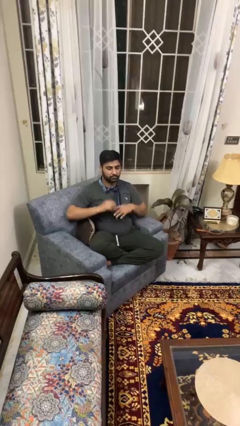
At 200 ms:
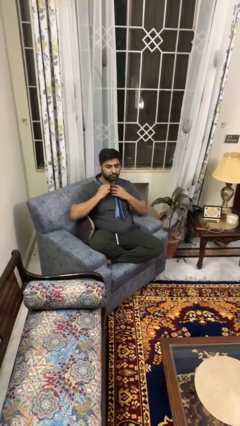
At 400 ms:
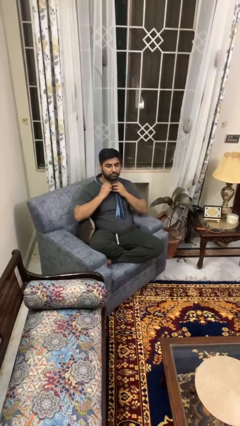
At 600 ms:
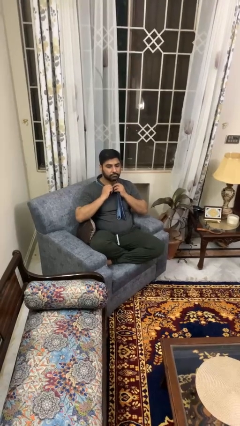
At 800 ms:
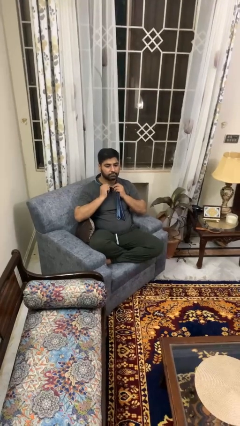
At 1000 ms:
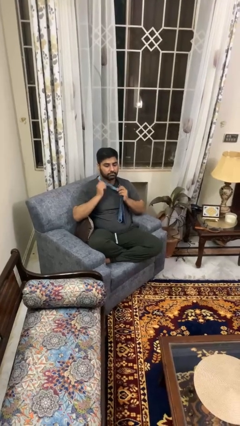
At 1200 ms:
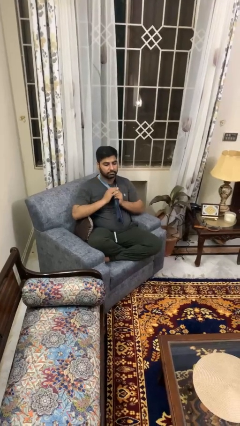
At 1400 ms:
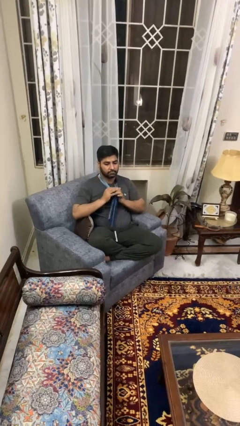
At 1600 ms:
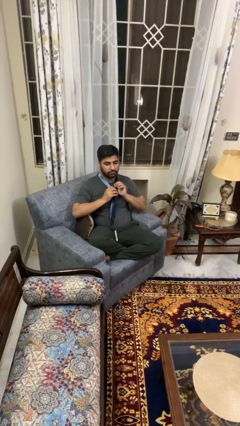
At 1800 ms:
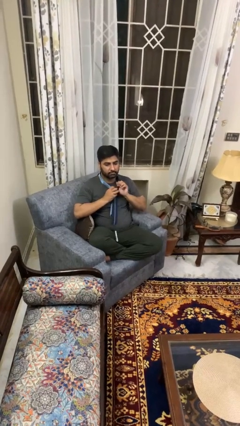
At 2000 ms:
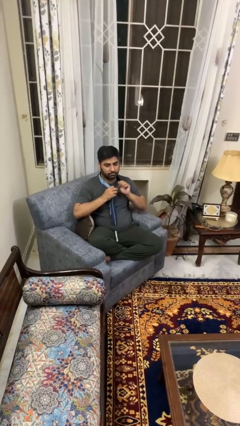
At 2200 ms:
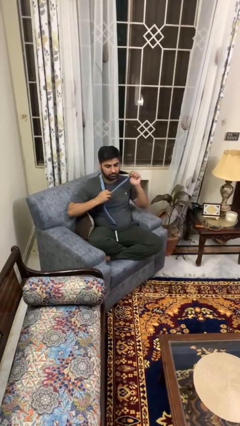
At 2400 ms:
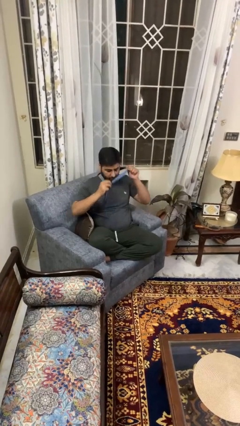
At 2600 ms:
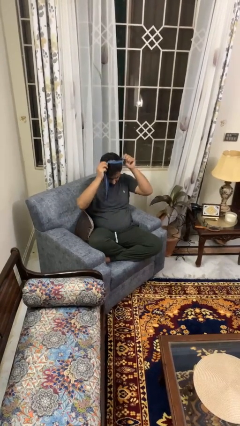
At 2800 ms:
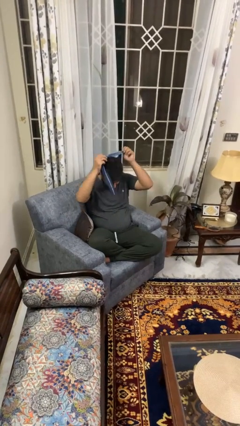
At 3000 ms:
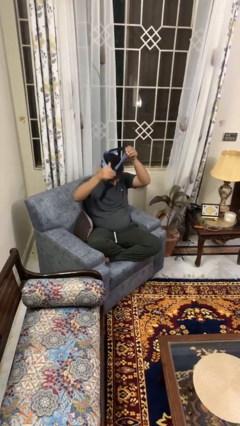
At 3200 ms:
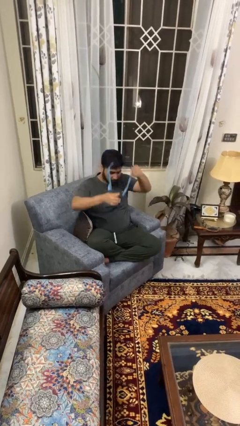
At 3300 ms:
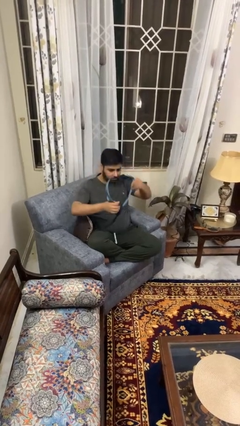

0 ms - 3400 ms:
person takes off necktie

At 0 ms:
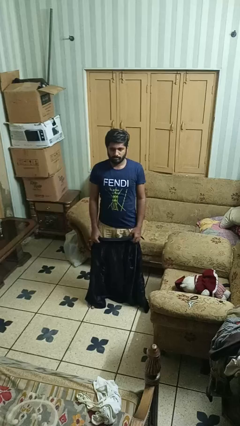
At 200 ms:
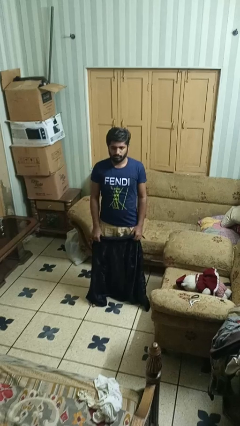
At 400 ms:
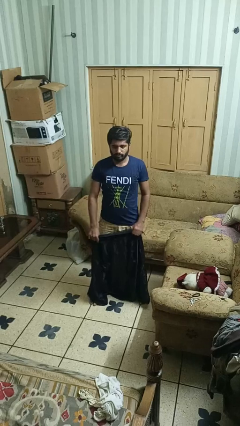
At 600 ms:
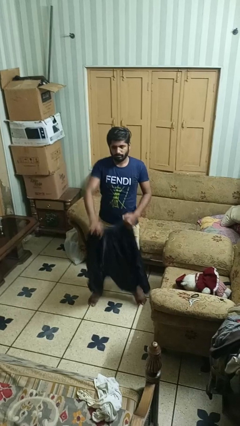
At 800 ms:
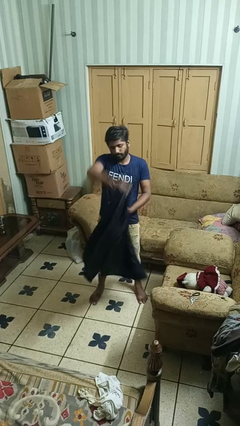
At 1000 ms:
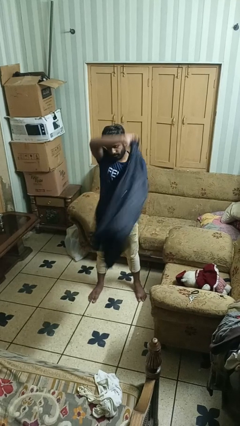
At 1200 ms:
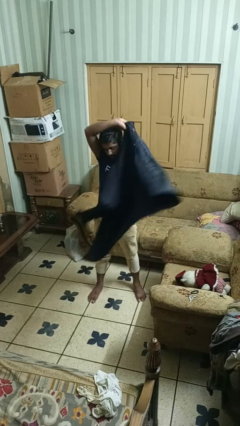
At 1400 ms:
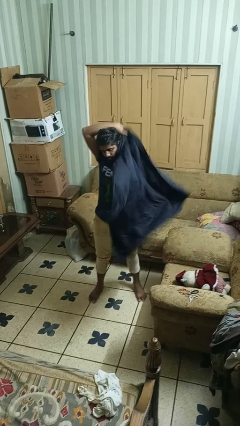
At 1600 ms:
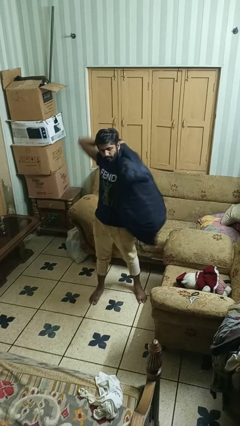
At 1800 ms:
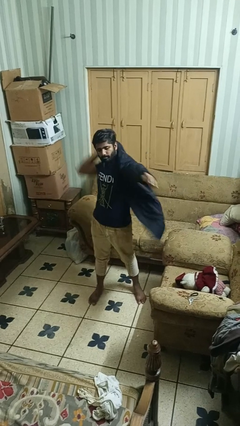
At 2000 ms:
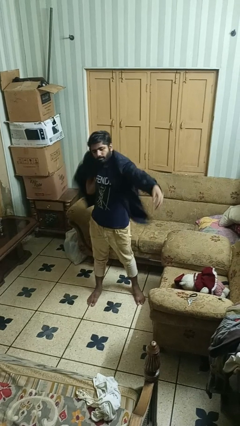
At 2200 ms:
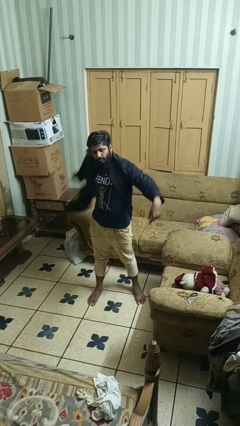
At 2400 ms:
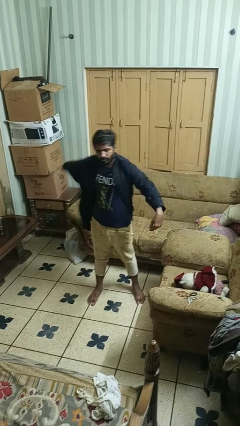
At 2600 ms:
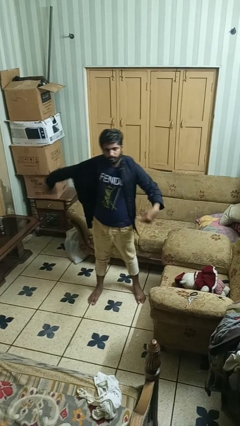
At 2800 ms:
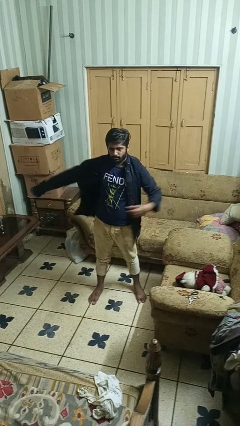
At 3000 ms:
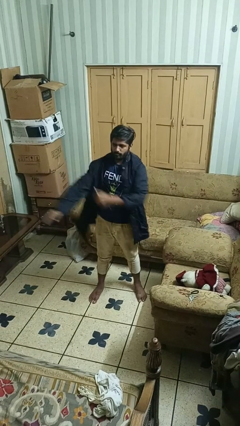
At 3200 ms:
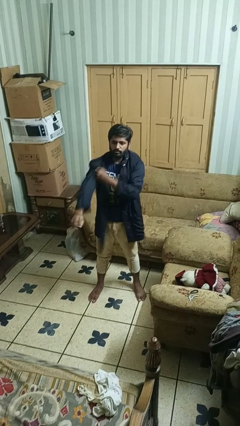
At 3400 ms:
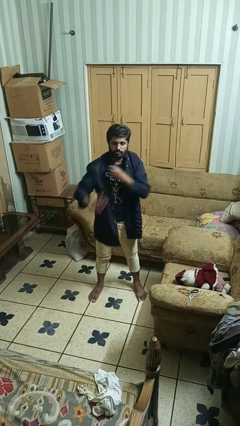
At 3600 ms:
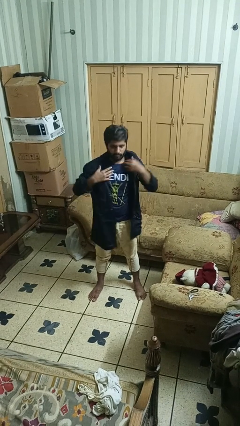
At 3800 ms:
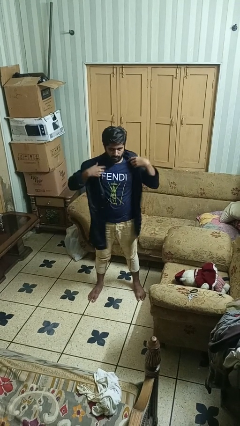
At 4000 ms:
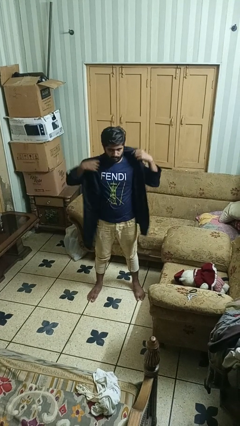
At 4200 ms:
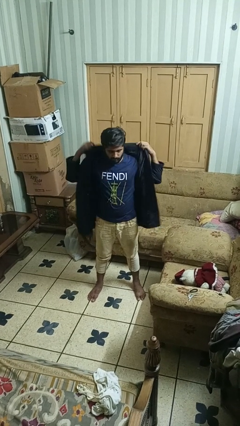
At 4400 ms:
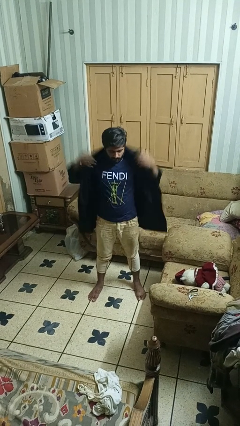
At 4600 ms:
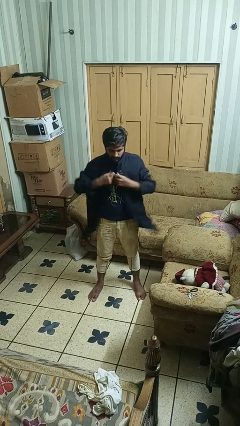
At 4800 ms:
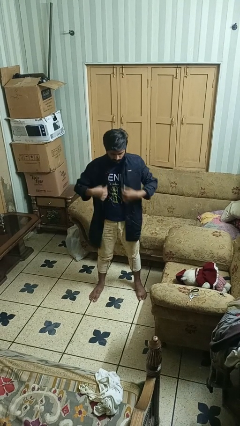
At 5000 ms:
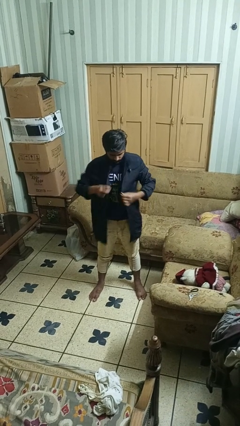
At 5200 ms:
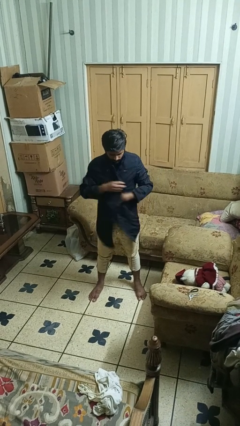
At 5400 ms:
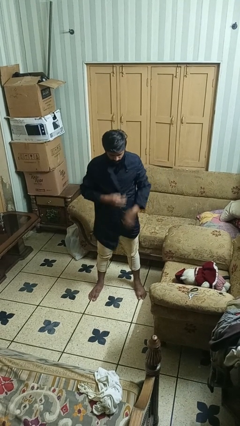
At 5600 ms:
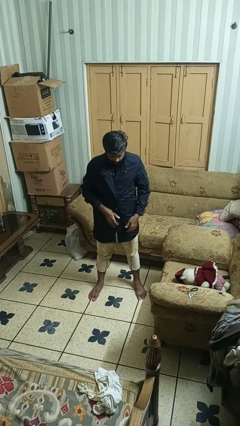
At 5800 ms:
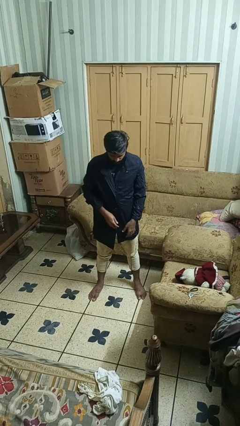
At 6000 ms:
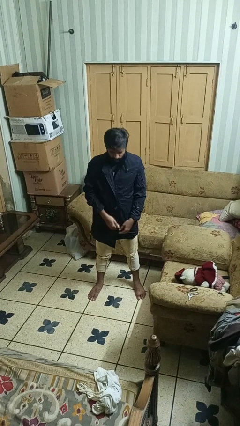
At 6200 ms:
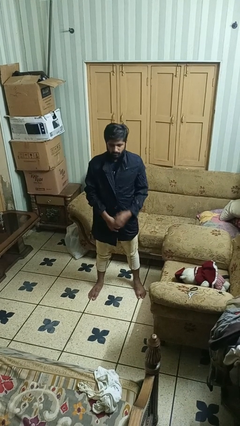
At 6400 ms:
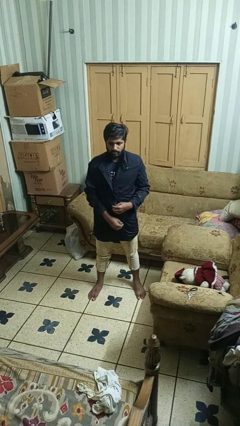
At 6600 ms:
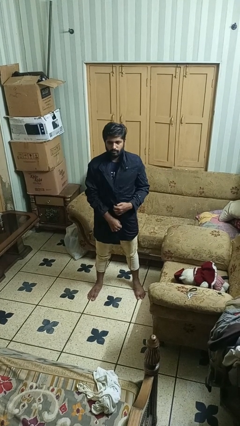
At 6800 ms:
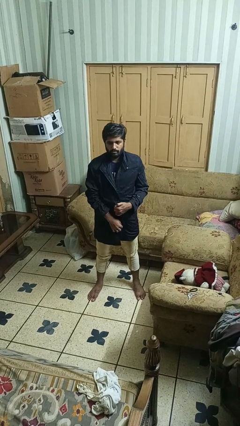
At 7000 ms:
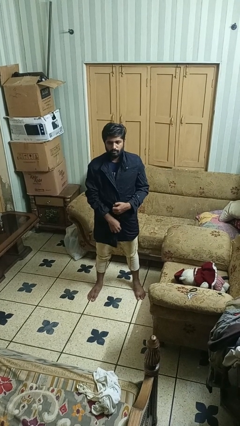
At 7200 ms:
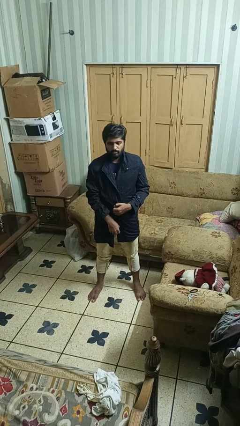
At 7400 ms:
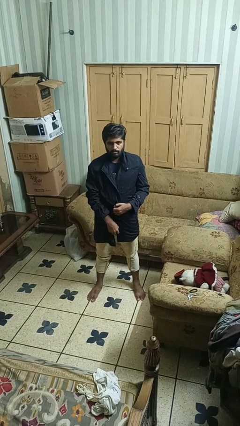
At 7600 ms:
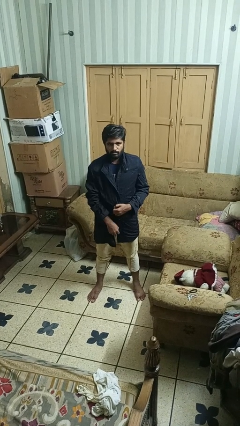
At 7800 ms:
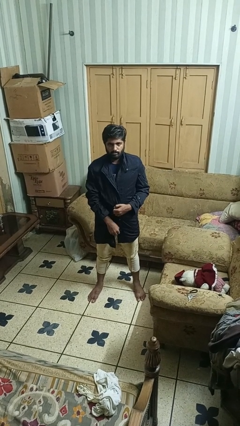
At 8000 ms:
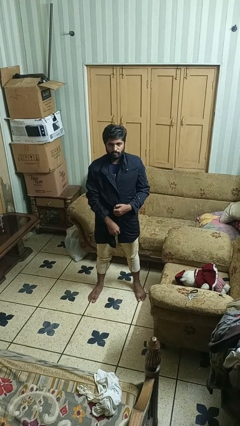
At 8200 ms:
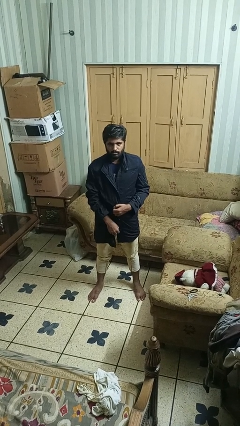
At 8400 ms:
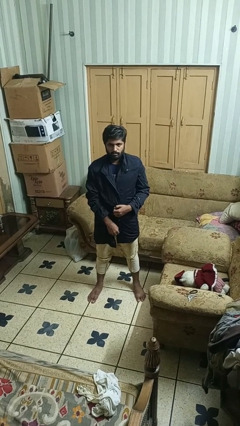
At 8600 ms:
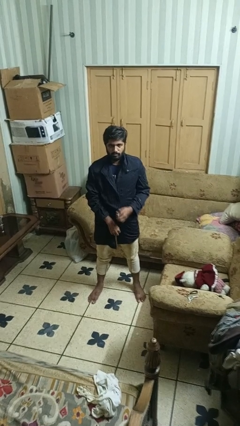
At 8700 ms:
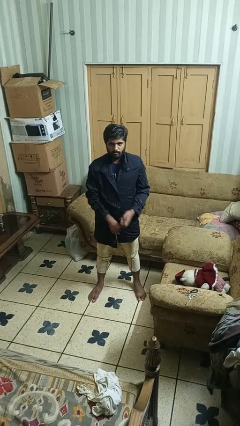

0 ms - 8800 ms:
person puts on jacket

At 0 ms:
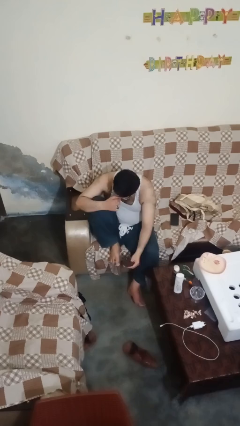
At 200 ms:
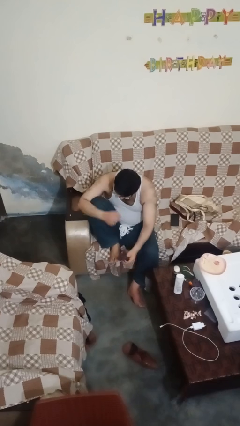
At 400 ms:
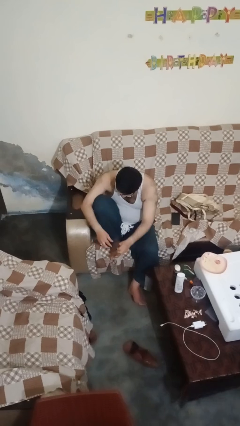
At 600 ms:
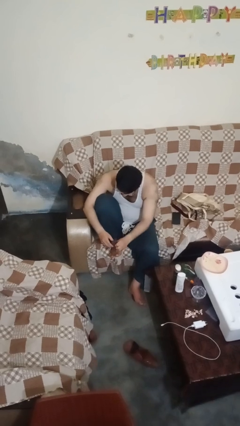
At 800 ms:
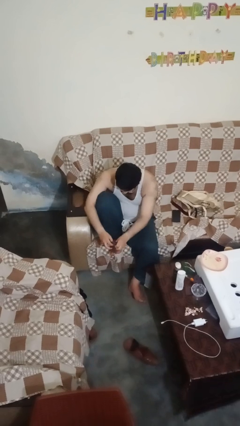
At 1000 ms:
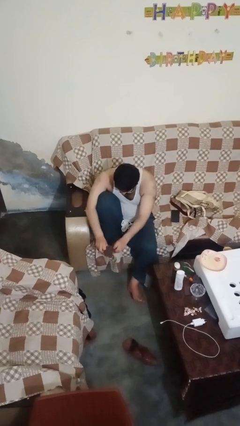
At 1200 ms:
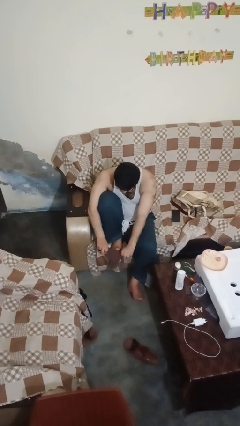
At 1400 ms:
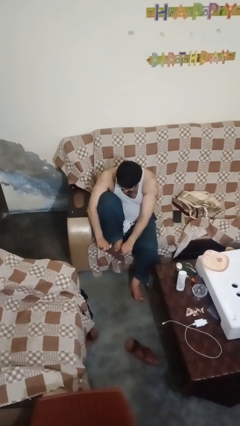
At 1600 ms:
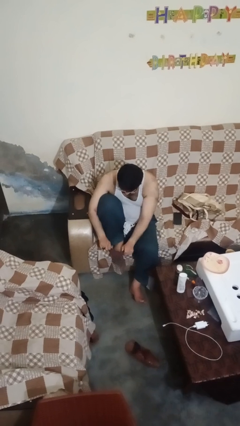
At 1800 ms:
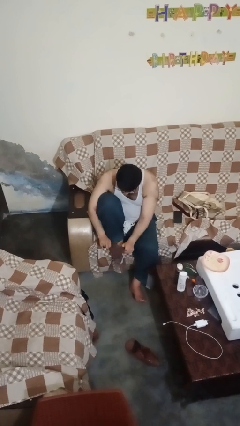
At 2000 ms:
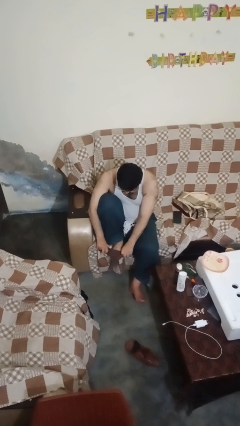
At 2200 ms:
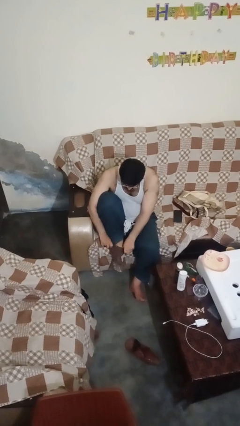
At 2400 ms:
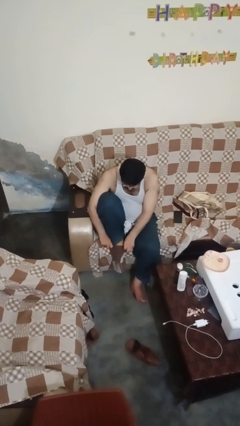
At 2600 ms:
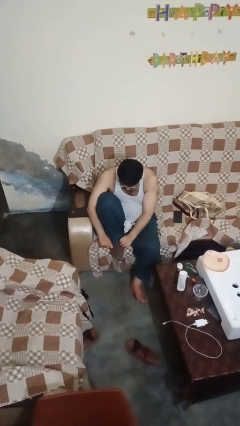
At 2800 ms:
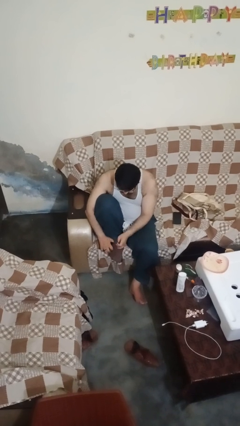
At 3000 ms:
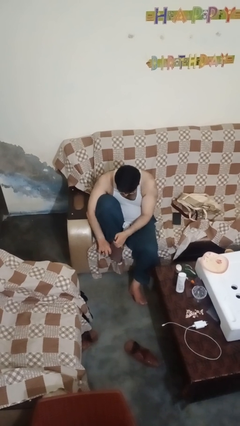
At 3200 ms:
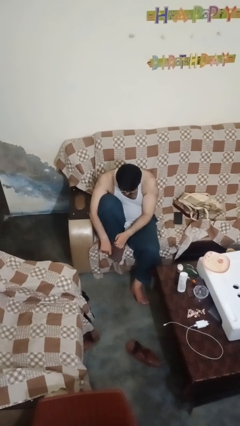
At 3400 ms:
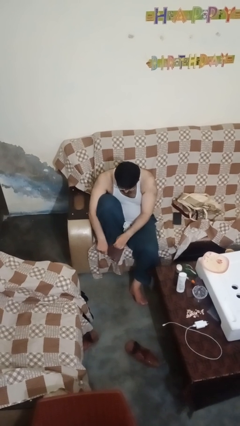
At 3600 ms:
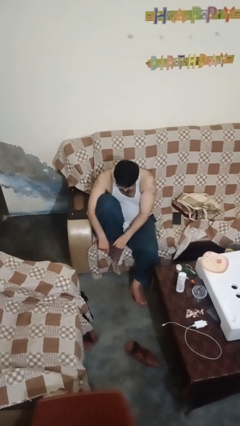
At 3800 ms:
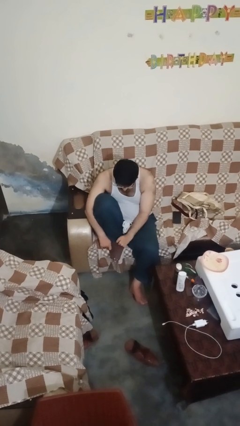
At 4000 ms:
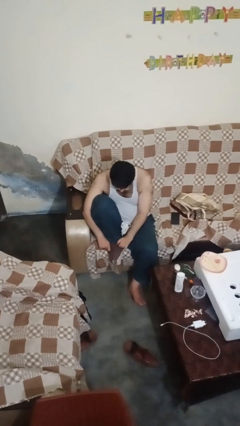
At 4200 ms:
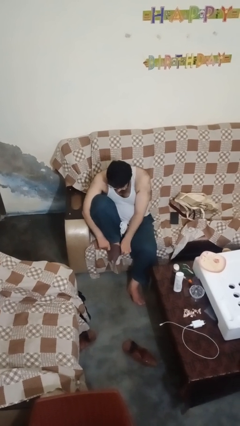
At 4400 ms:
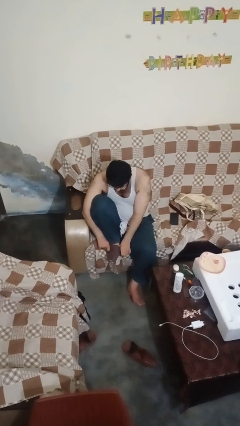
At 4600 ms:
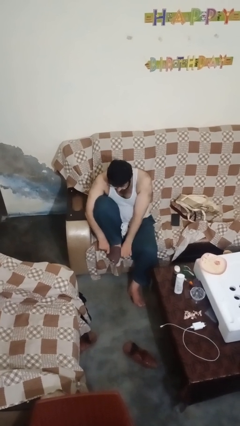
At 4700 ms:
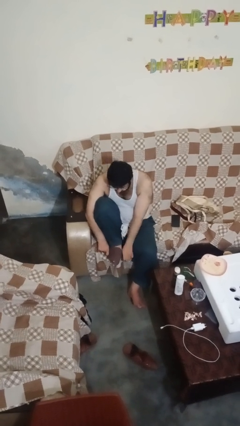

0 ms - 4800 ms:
person puts on socks

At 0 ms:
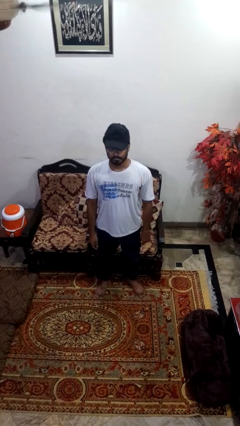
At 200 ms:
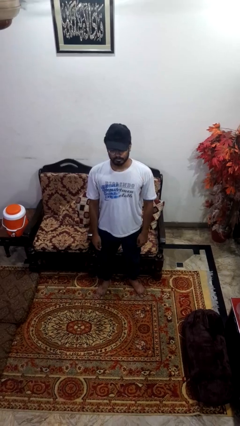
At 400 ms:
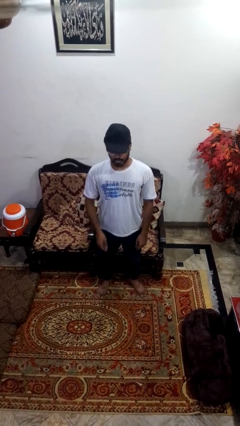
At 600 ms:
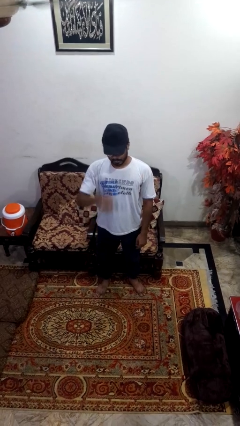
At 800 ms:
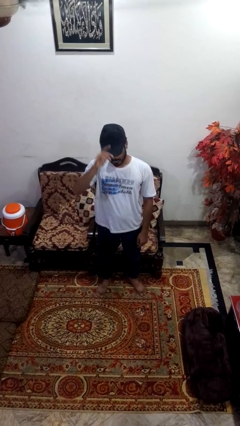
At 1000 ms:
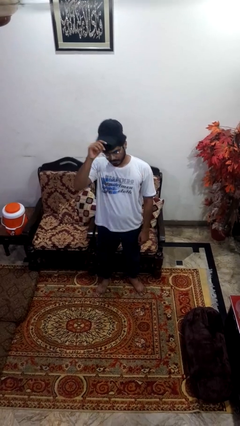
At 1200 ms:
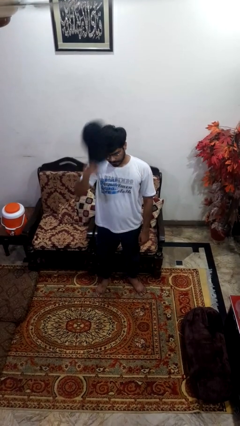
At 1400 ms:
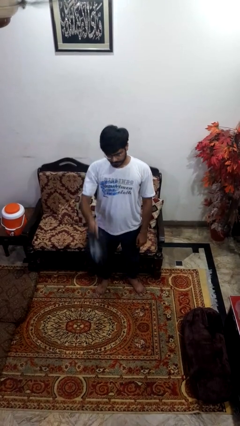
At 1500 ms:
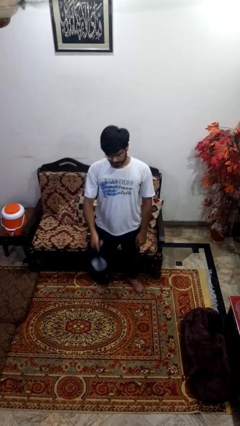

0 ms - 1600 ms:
person takes off hat
